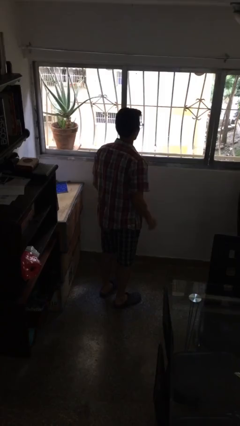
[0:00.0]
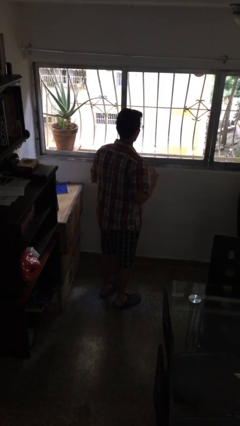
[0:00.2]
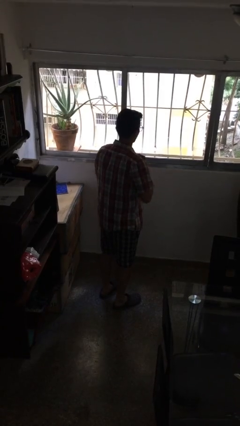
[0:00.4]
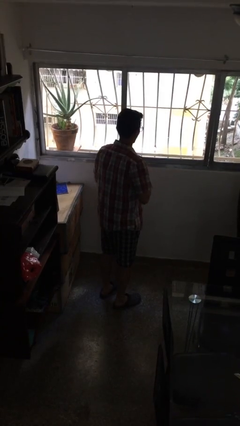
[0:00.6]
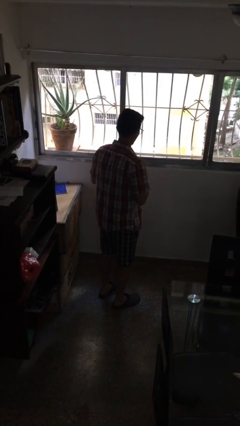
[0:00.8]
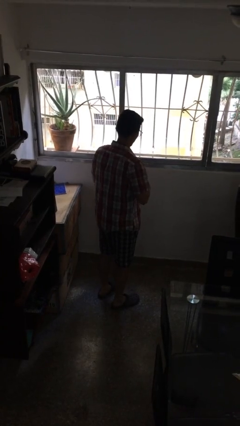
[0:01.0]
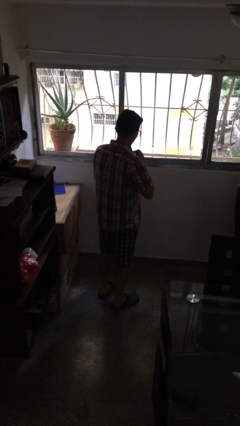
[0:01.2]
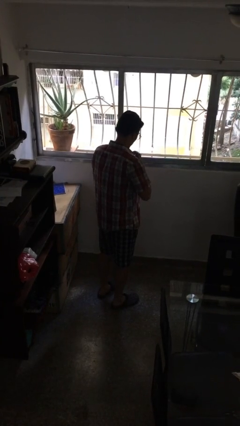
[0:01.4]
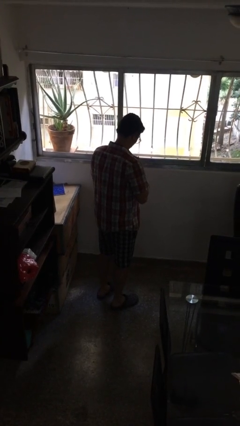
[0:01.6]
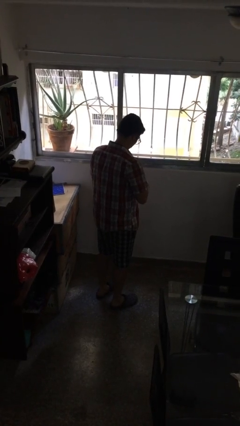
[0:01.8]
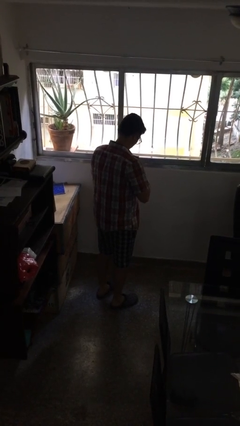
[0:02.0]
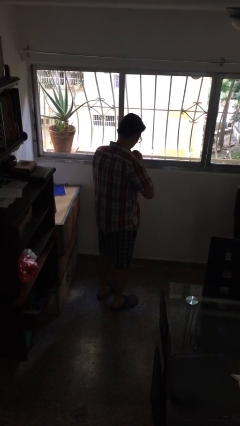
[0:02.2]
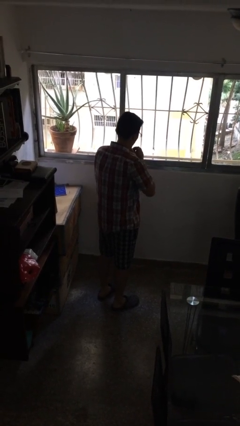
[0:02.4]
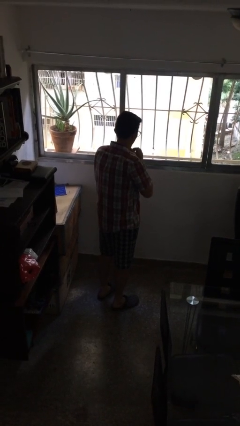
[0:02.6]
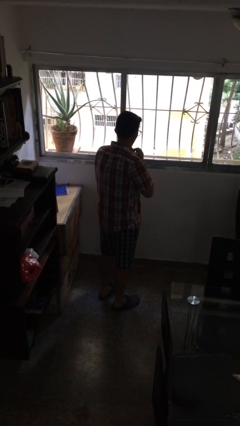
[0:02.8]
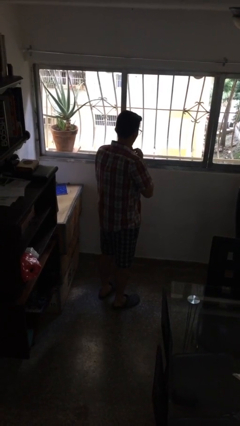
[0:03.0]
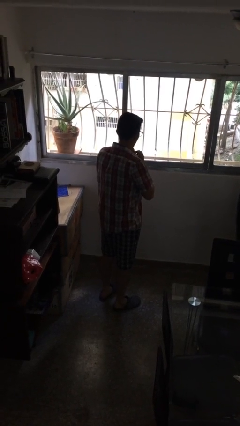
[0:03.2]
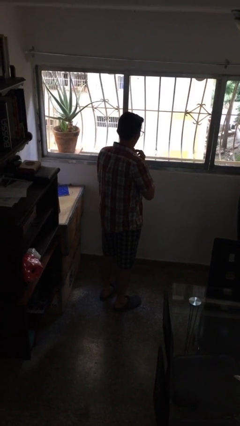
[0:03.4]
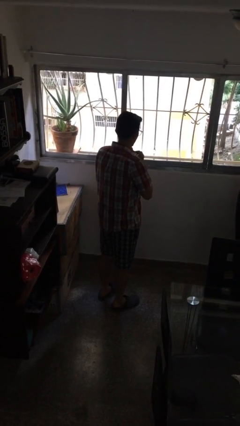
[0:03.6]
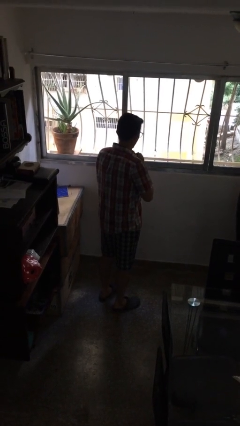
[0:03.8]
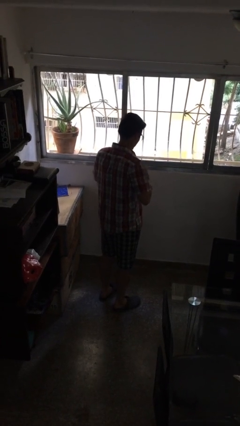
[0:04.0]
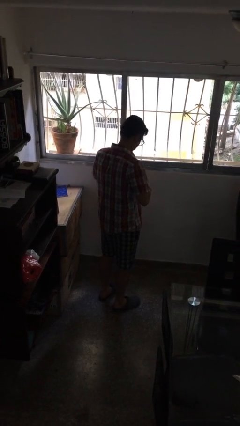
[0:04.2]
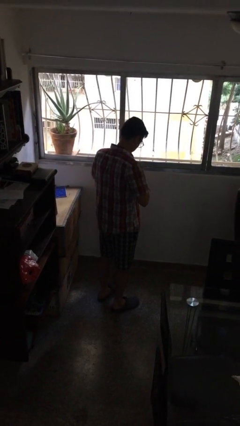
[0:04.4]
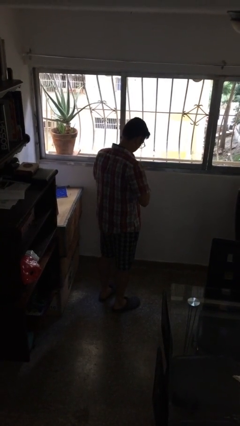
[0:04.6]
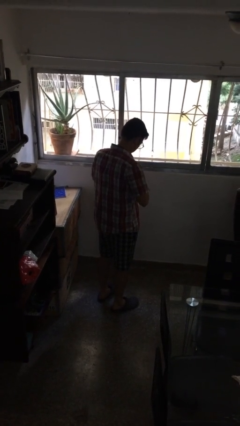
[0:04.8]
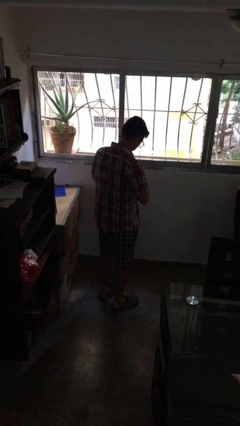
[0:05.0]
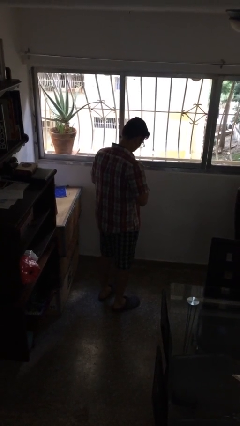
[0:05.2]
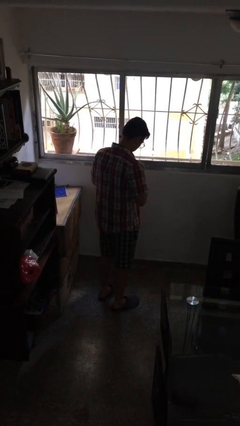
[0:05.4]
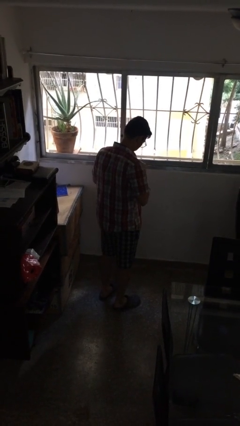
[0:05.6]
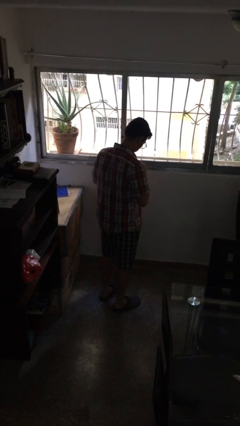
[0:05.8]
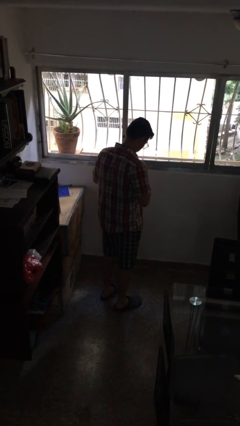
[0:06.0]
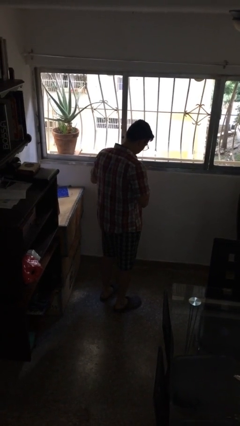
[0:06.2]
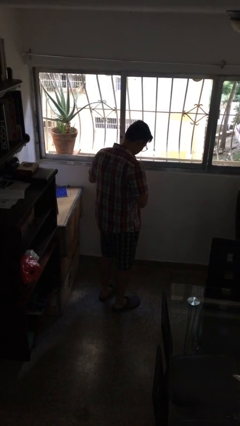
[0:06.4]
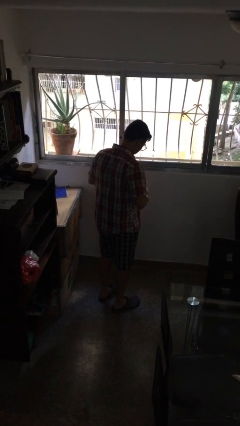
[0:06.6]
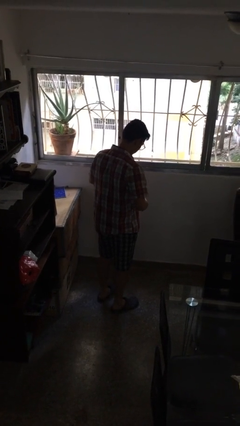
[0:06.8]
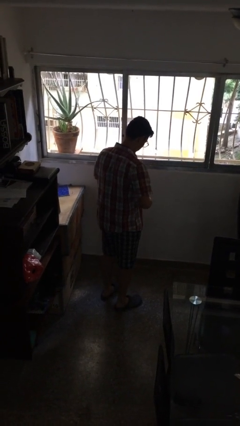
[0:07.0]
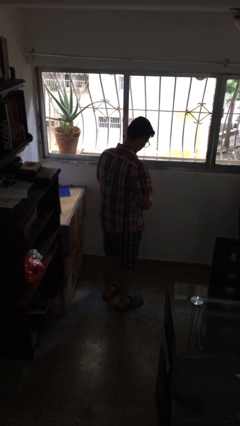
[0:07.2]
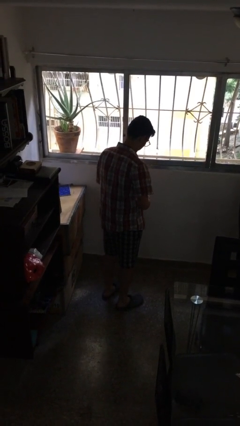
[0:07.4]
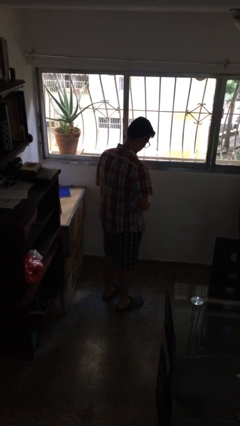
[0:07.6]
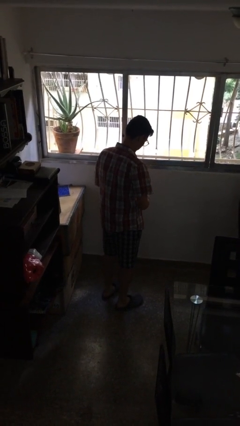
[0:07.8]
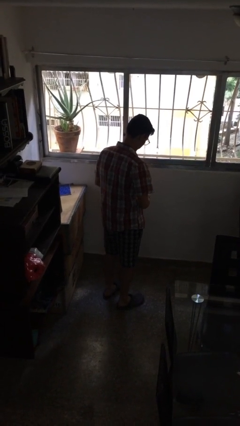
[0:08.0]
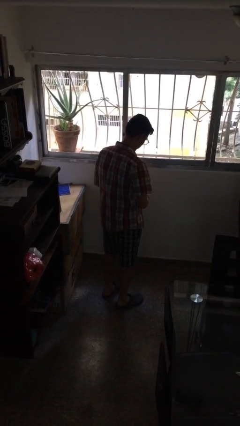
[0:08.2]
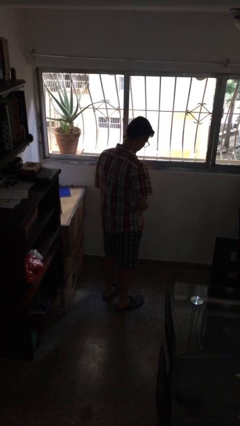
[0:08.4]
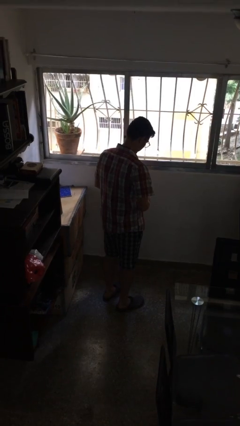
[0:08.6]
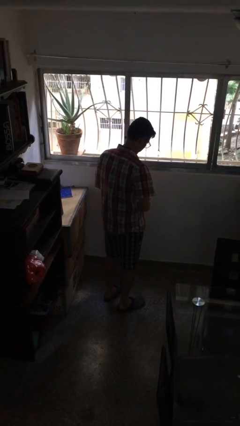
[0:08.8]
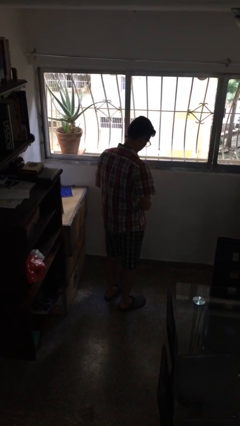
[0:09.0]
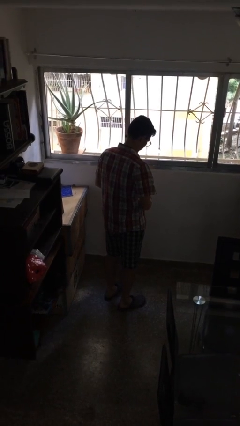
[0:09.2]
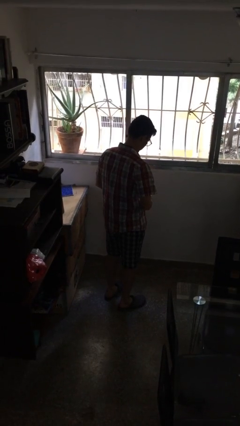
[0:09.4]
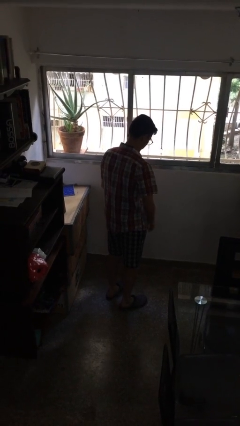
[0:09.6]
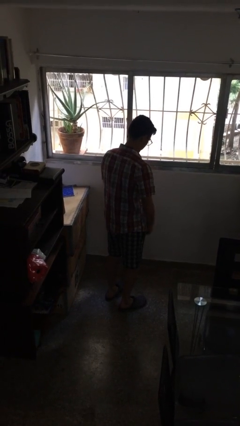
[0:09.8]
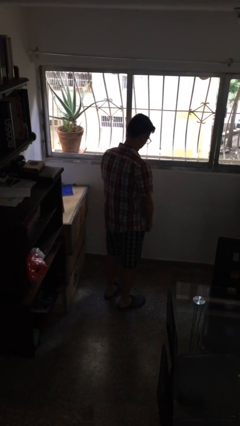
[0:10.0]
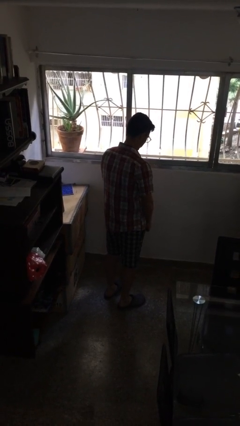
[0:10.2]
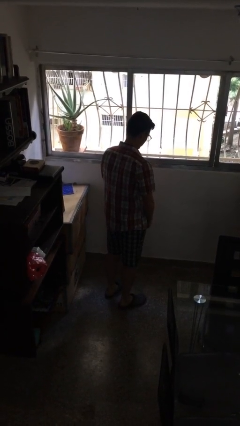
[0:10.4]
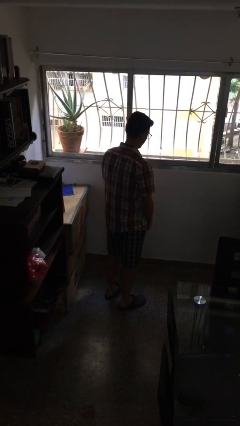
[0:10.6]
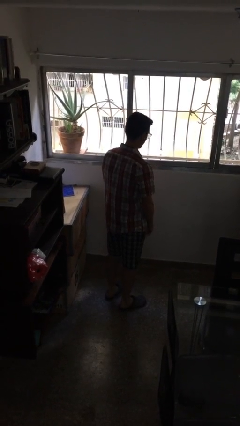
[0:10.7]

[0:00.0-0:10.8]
person unbuttons shirt

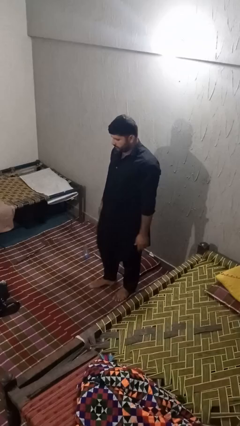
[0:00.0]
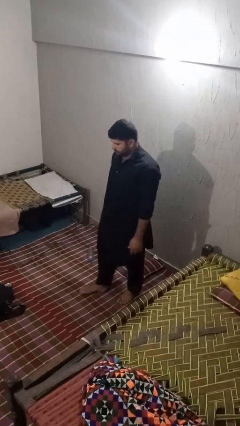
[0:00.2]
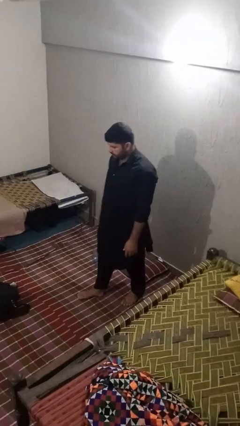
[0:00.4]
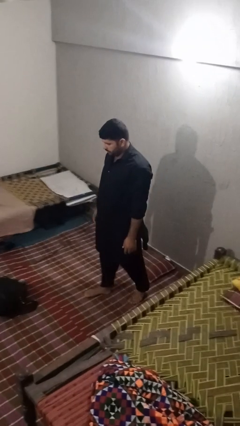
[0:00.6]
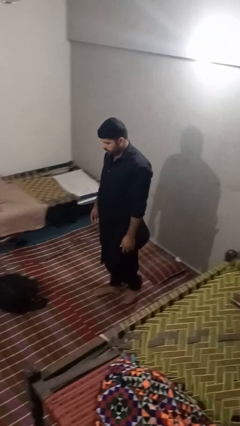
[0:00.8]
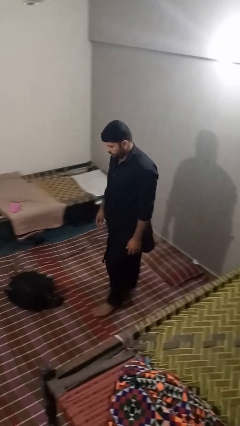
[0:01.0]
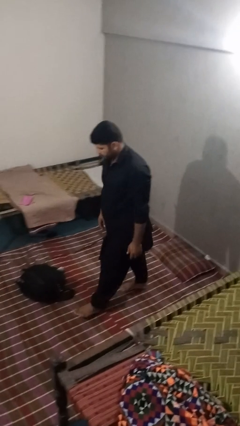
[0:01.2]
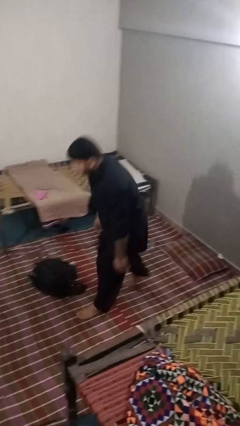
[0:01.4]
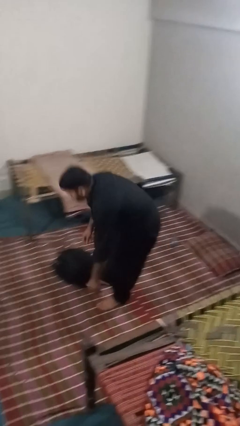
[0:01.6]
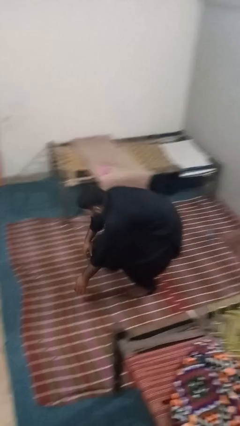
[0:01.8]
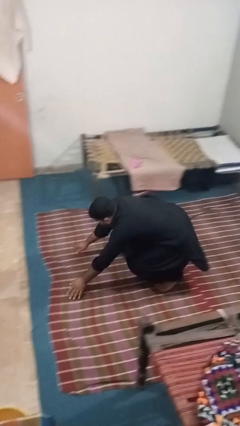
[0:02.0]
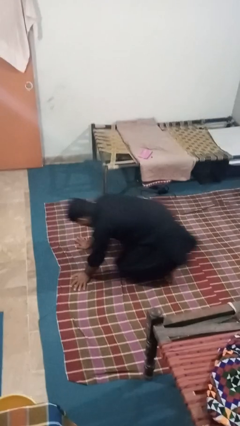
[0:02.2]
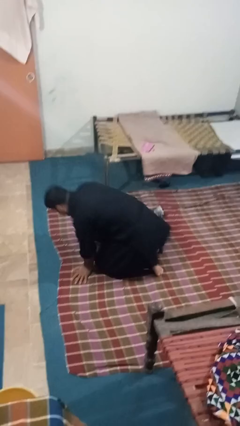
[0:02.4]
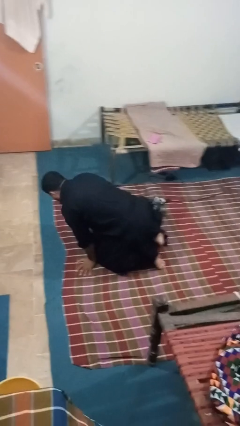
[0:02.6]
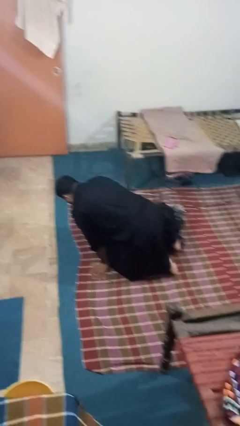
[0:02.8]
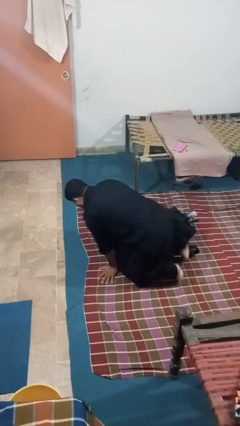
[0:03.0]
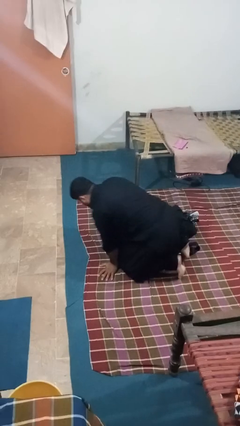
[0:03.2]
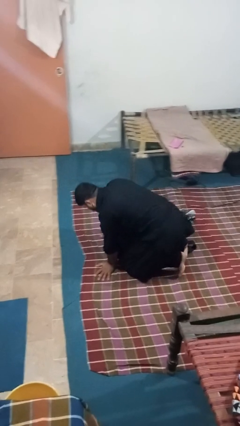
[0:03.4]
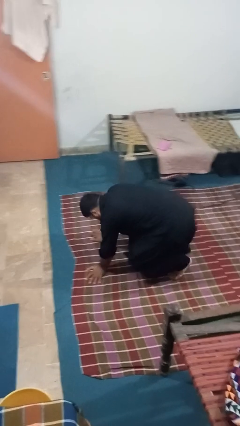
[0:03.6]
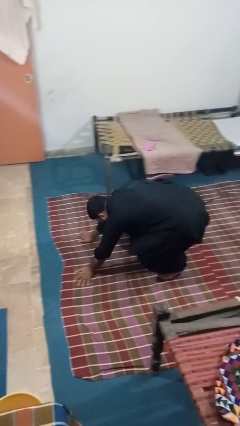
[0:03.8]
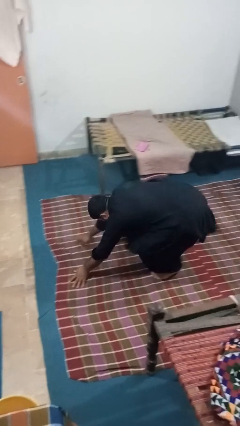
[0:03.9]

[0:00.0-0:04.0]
person trips on object on floor

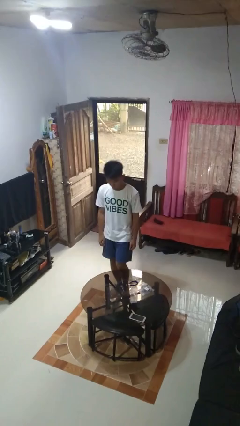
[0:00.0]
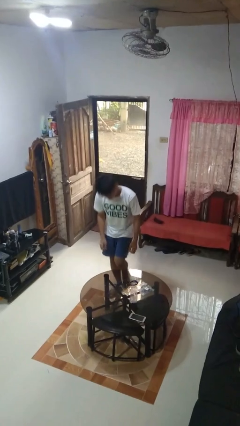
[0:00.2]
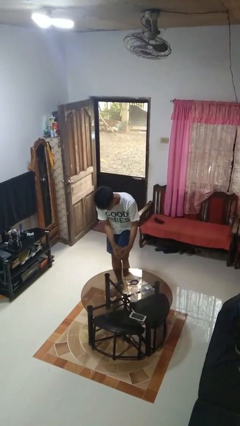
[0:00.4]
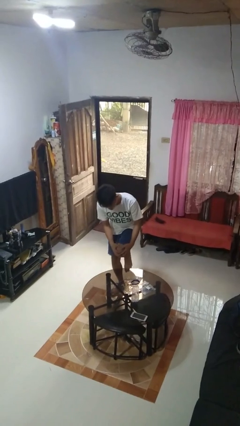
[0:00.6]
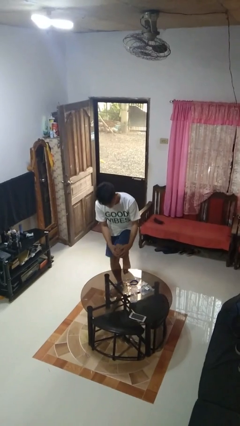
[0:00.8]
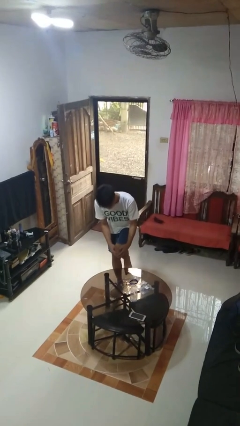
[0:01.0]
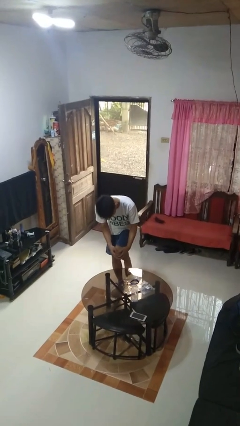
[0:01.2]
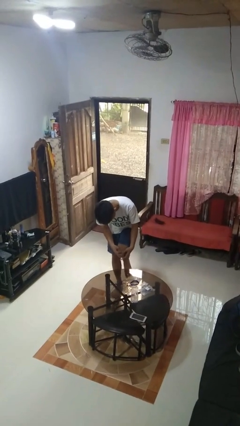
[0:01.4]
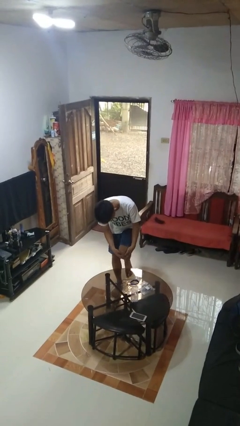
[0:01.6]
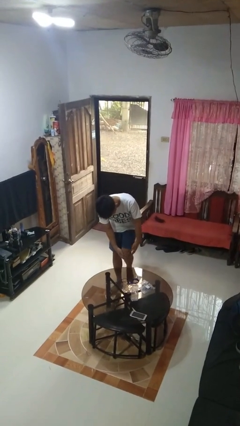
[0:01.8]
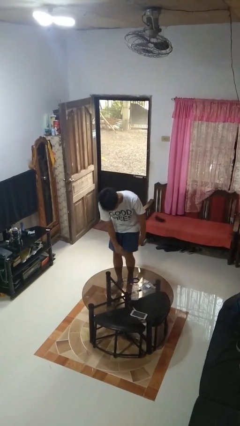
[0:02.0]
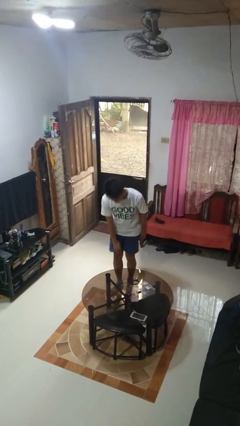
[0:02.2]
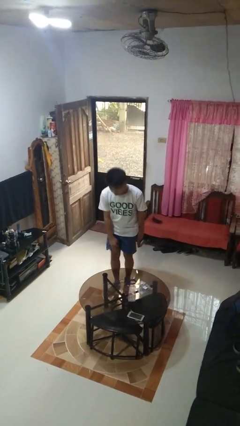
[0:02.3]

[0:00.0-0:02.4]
person bumps into table

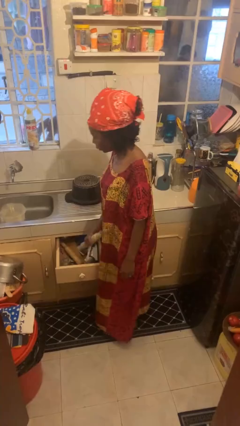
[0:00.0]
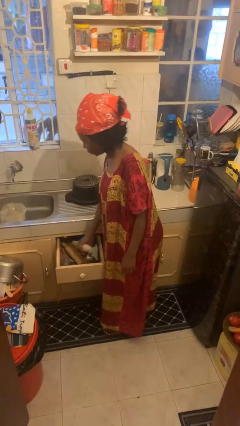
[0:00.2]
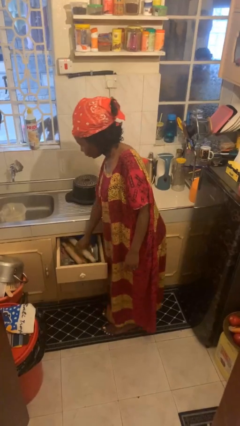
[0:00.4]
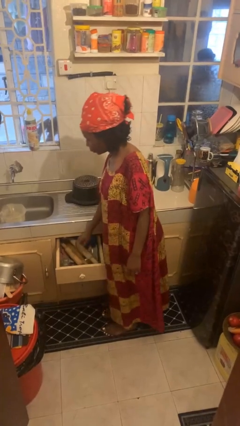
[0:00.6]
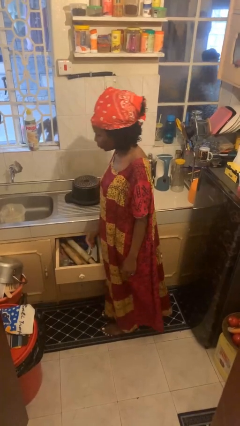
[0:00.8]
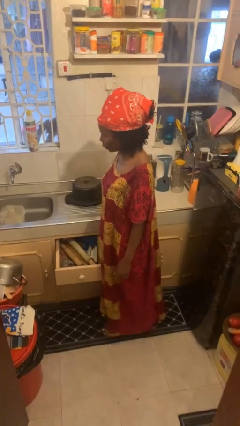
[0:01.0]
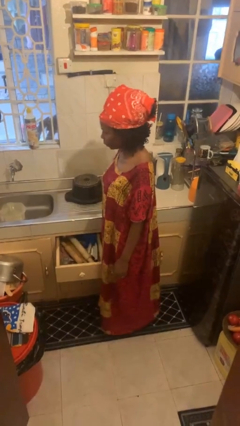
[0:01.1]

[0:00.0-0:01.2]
person puts object into kitchen drawer
